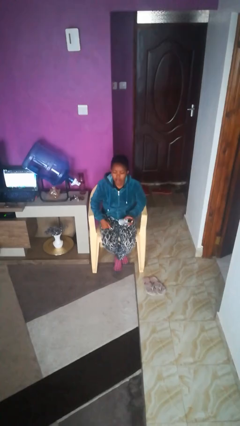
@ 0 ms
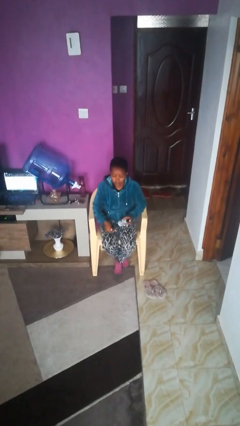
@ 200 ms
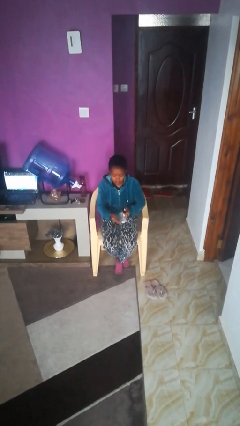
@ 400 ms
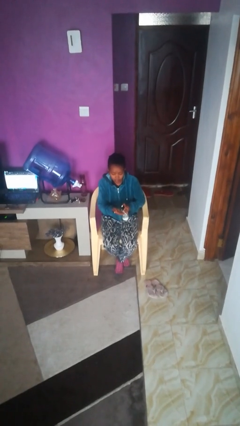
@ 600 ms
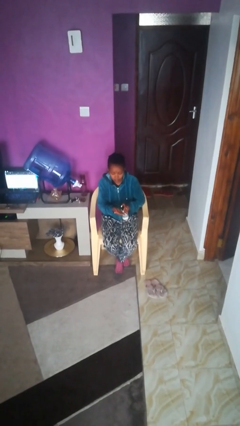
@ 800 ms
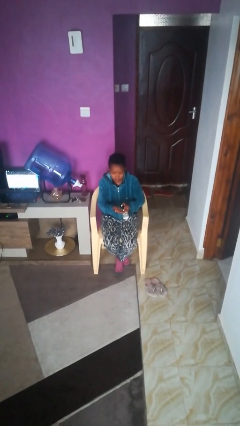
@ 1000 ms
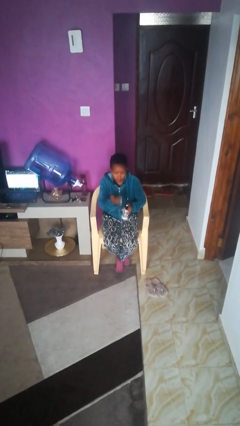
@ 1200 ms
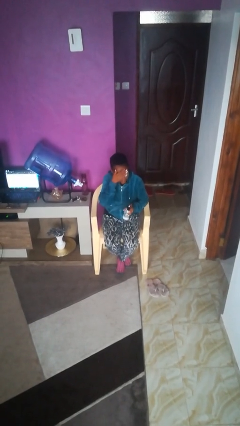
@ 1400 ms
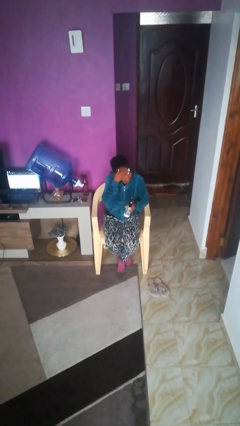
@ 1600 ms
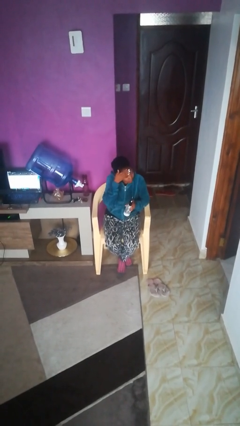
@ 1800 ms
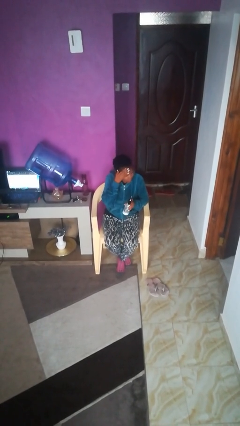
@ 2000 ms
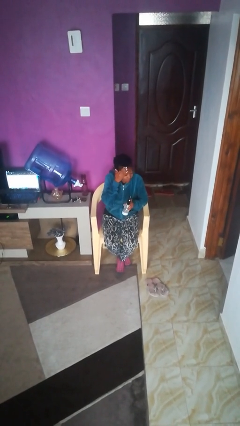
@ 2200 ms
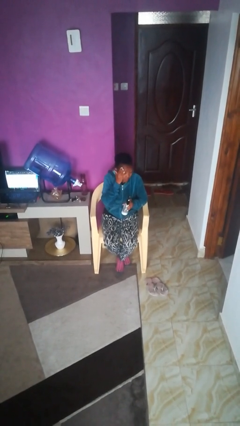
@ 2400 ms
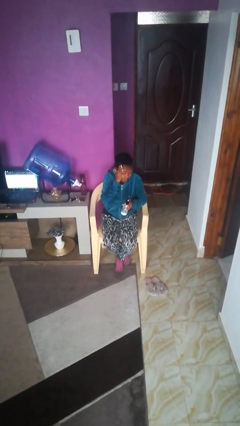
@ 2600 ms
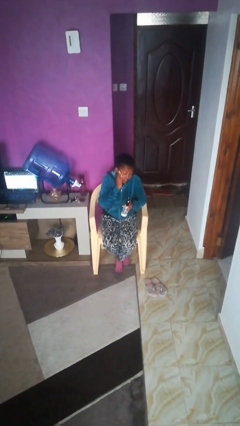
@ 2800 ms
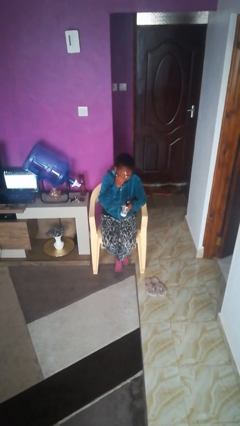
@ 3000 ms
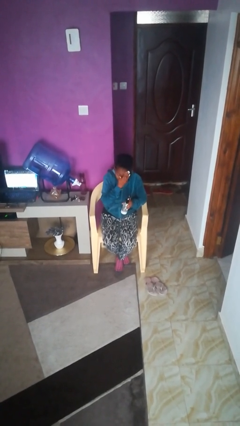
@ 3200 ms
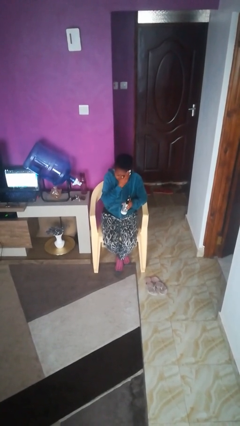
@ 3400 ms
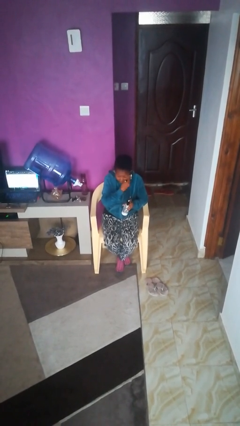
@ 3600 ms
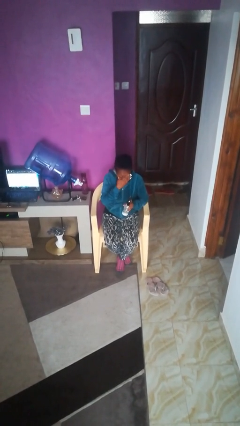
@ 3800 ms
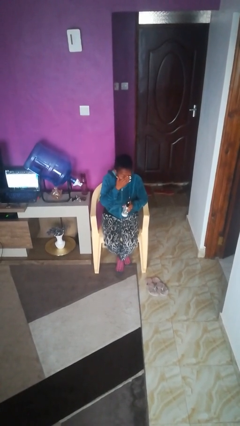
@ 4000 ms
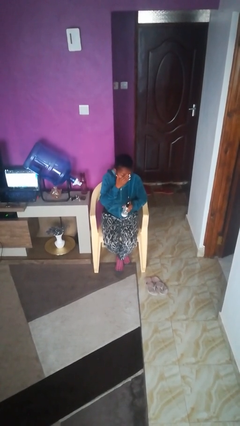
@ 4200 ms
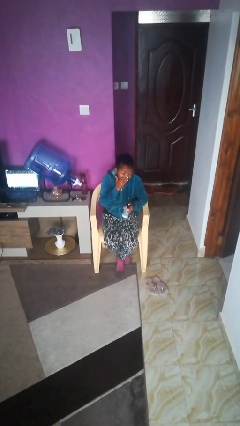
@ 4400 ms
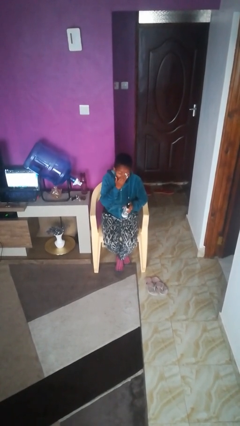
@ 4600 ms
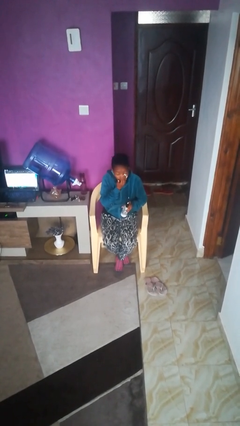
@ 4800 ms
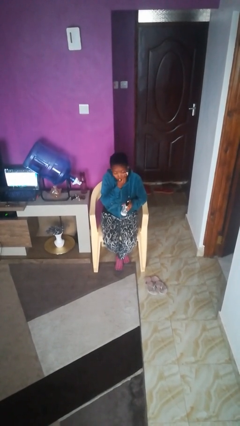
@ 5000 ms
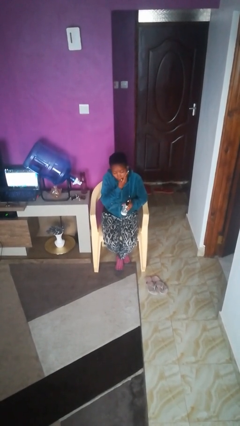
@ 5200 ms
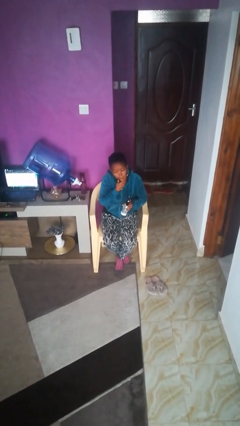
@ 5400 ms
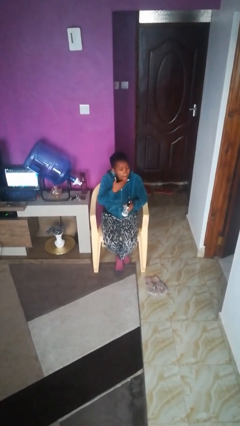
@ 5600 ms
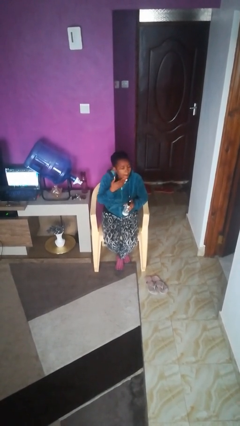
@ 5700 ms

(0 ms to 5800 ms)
person applies facial moisturizer

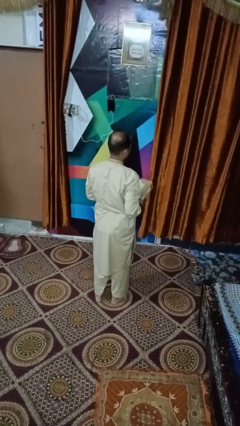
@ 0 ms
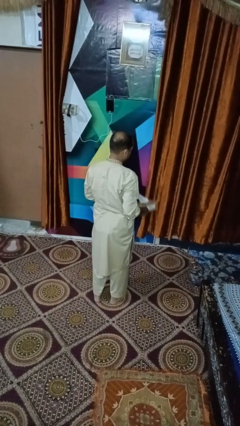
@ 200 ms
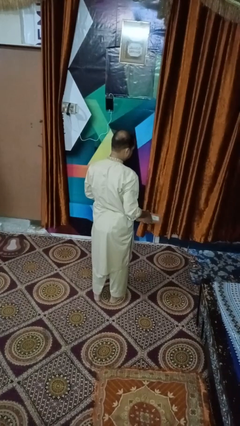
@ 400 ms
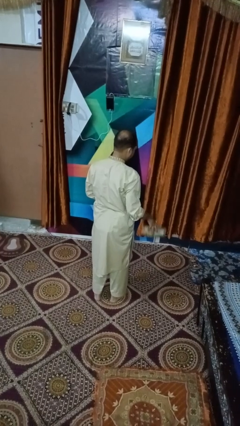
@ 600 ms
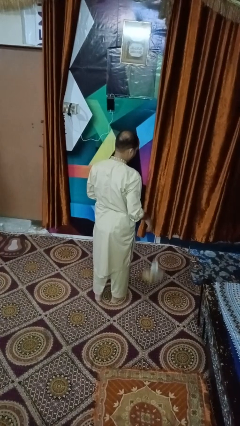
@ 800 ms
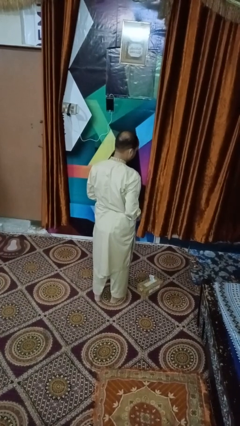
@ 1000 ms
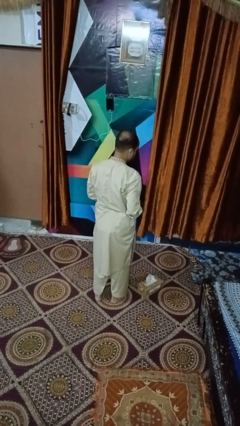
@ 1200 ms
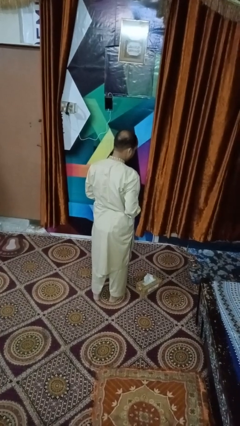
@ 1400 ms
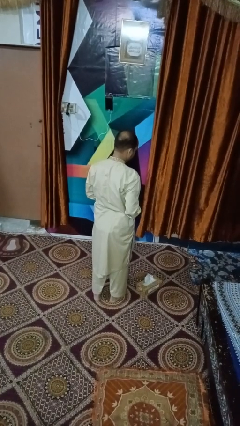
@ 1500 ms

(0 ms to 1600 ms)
person drops object

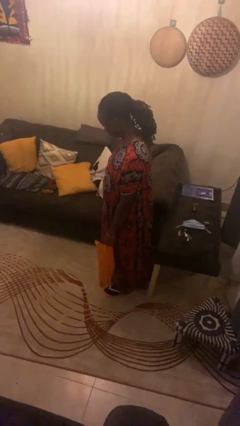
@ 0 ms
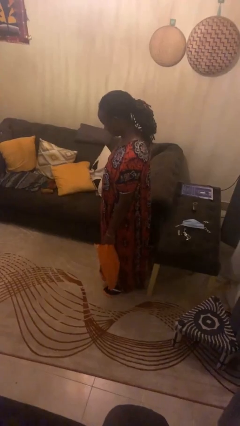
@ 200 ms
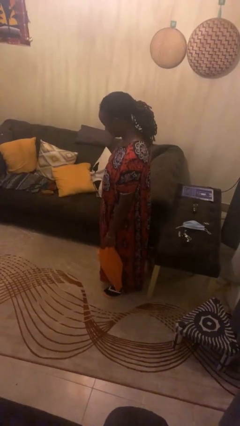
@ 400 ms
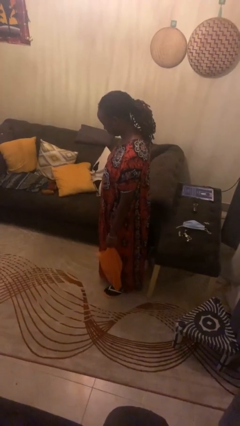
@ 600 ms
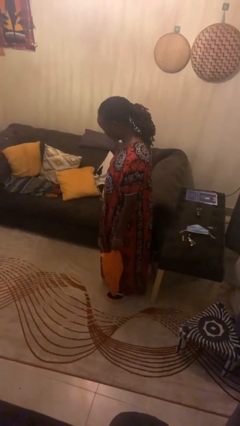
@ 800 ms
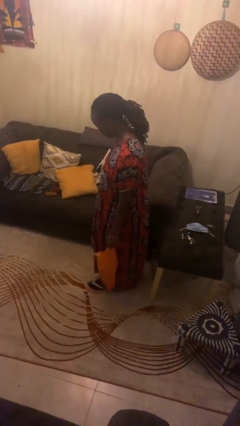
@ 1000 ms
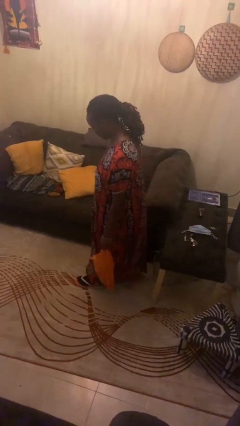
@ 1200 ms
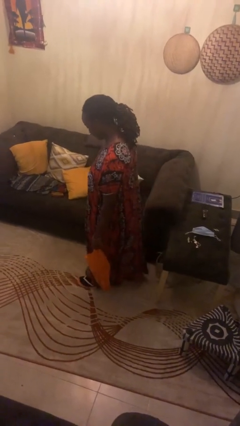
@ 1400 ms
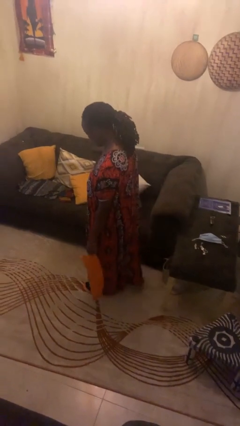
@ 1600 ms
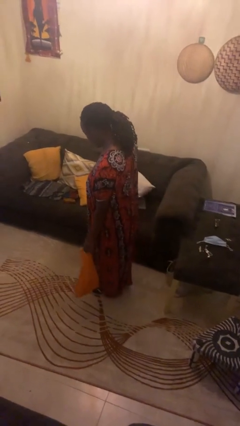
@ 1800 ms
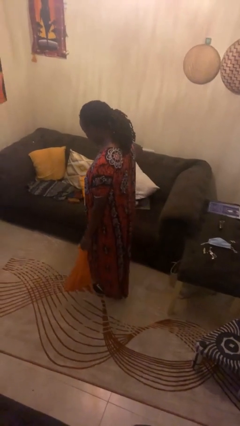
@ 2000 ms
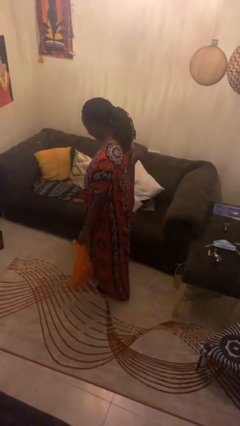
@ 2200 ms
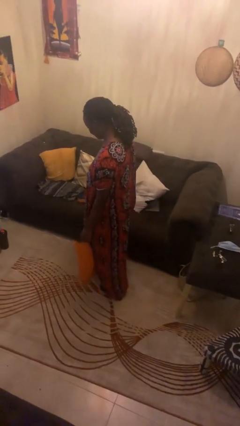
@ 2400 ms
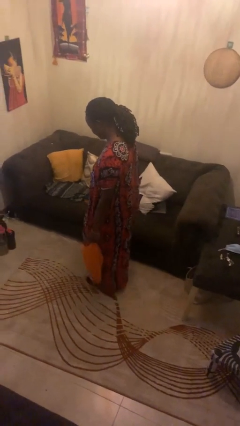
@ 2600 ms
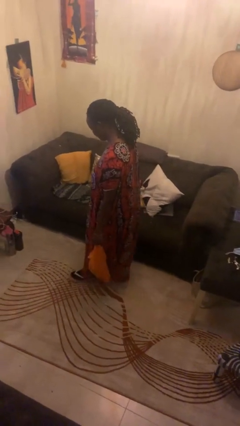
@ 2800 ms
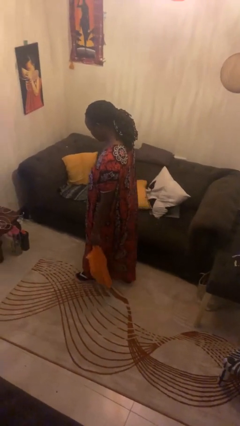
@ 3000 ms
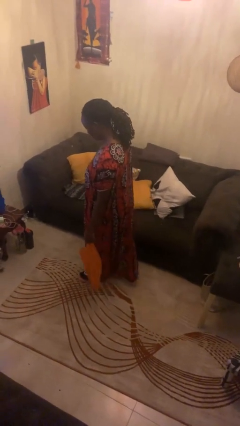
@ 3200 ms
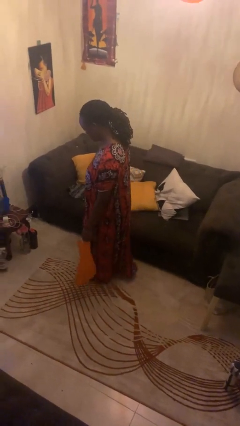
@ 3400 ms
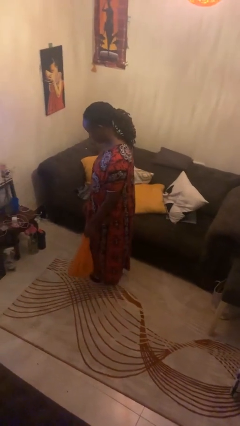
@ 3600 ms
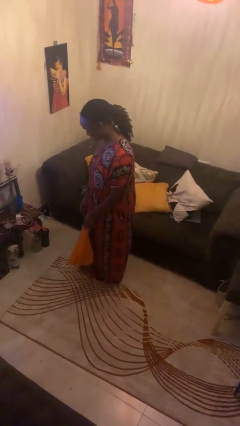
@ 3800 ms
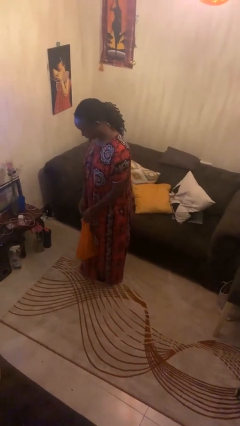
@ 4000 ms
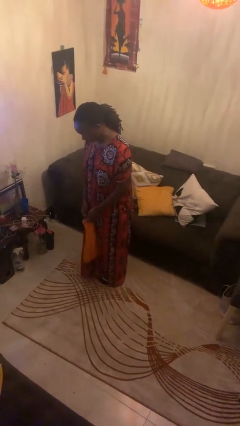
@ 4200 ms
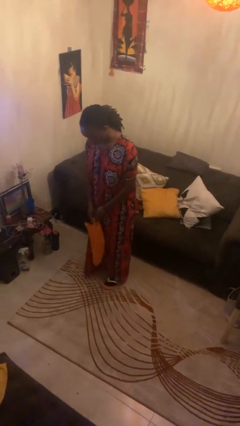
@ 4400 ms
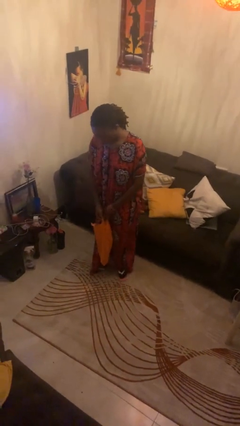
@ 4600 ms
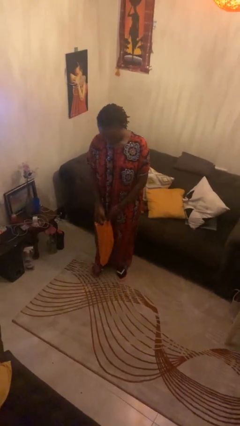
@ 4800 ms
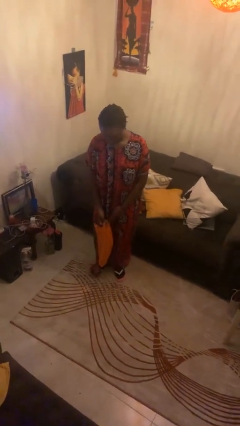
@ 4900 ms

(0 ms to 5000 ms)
person carries groceries

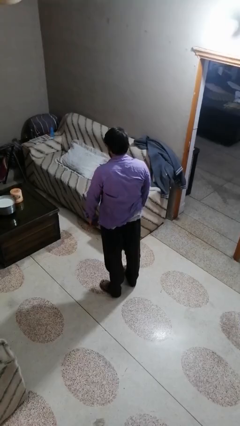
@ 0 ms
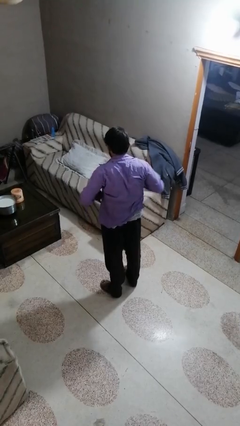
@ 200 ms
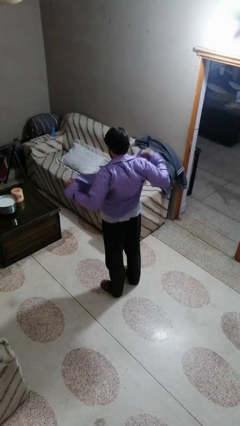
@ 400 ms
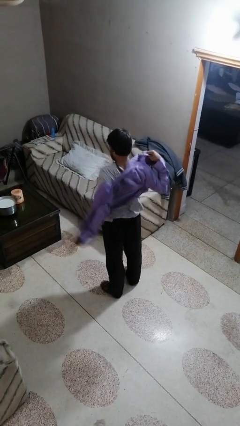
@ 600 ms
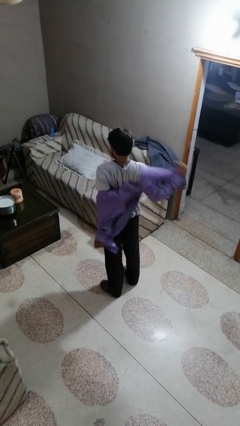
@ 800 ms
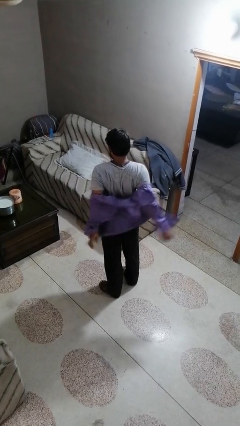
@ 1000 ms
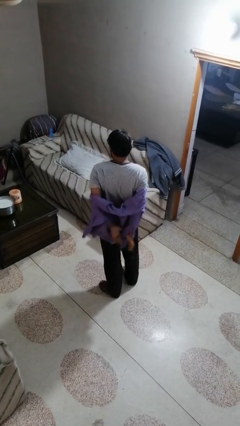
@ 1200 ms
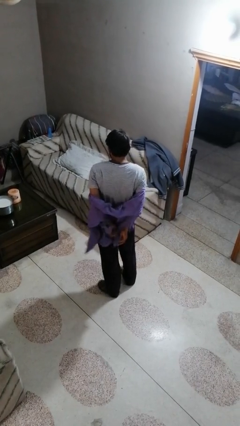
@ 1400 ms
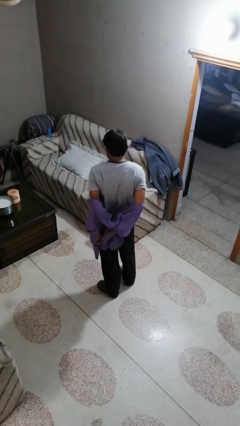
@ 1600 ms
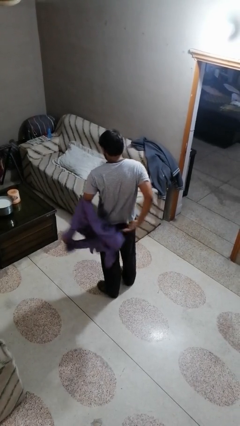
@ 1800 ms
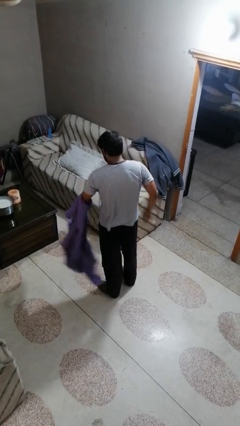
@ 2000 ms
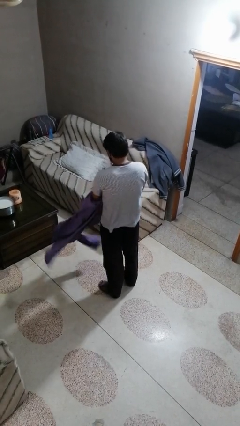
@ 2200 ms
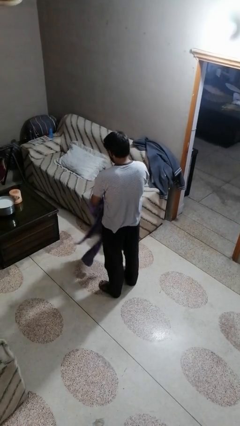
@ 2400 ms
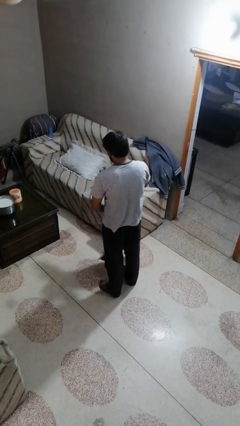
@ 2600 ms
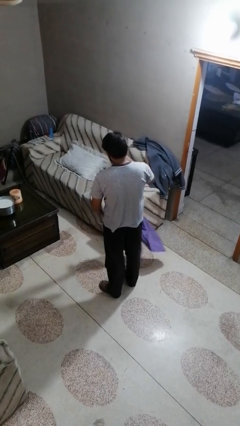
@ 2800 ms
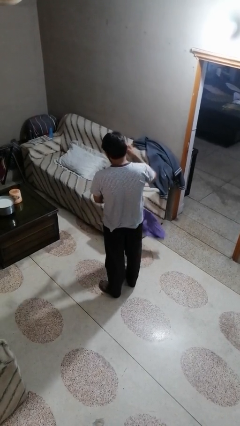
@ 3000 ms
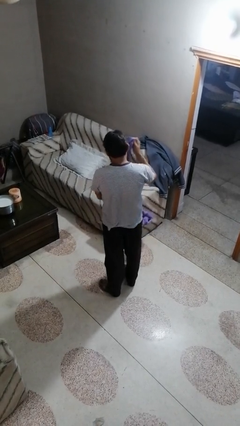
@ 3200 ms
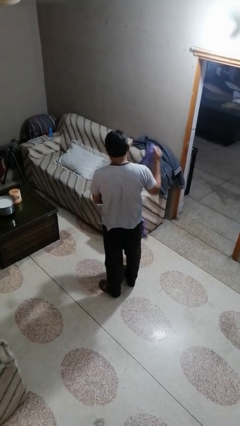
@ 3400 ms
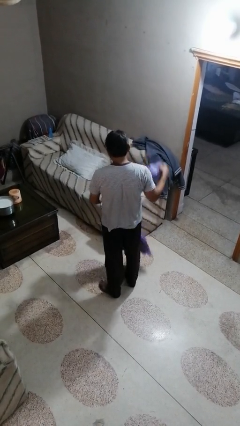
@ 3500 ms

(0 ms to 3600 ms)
person takes off shirt

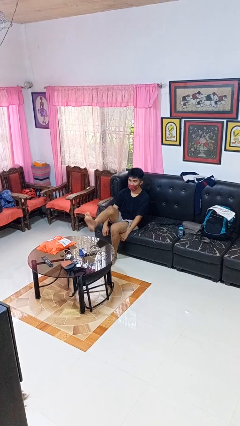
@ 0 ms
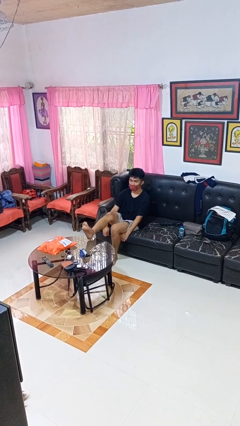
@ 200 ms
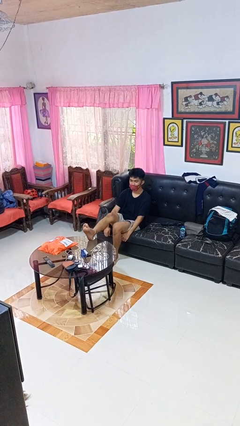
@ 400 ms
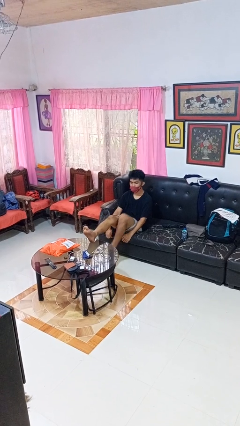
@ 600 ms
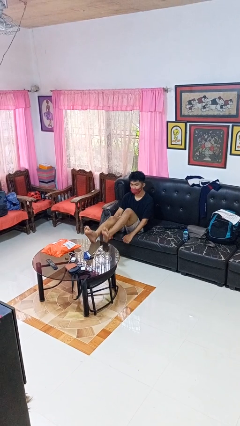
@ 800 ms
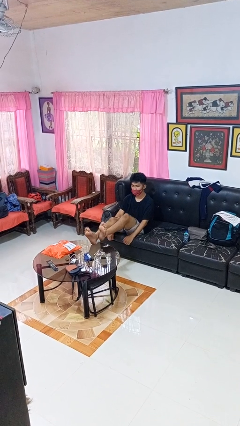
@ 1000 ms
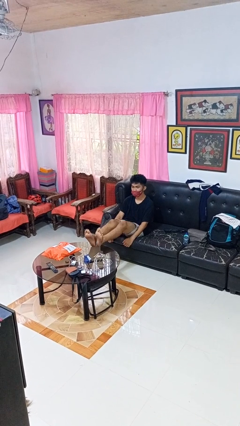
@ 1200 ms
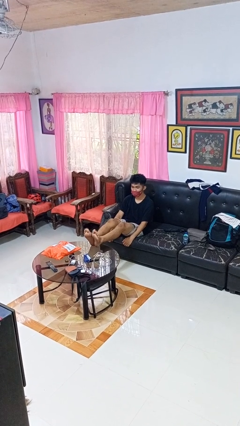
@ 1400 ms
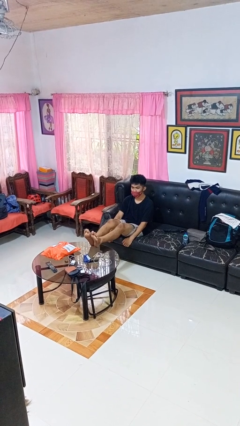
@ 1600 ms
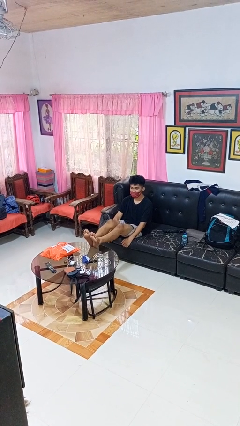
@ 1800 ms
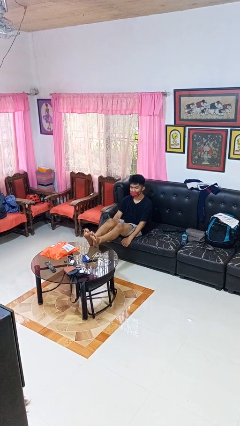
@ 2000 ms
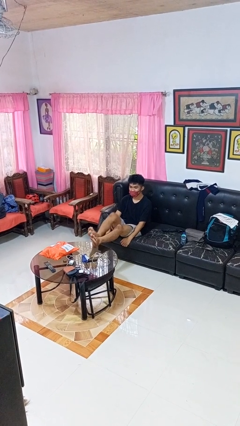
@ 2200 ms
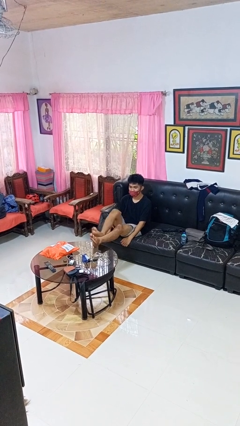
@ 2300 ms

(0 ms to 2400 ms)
person puts feet up
